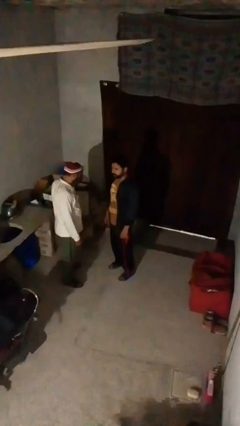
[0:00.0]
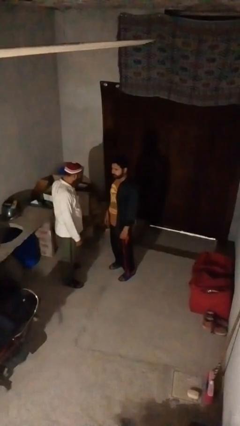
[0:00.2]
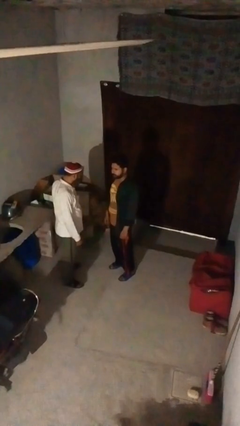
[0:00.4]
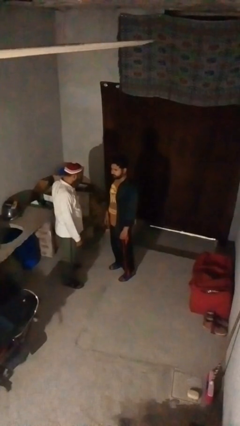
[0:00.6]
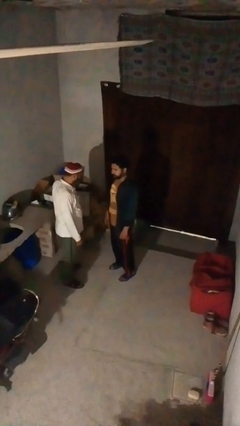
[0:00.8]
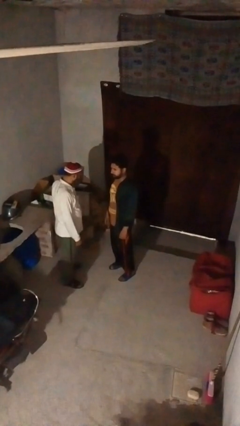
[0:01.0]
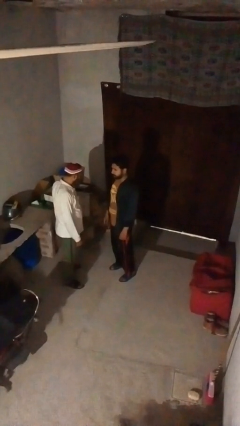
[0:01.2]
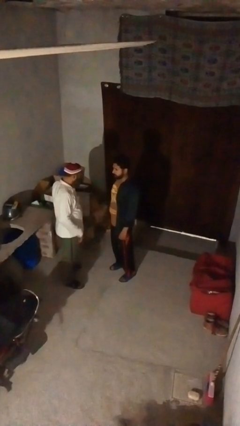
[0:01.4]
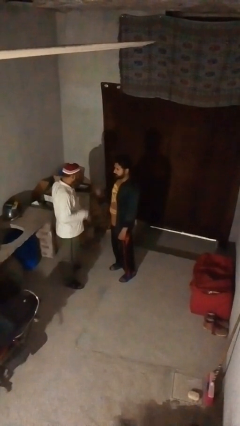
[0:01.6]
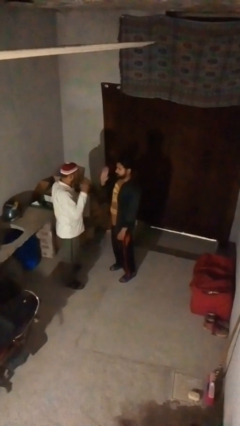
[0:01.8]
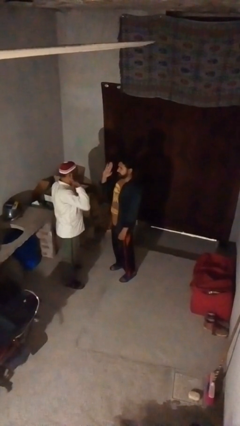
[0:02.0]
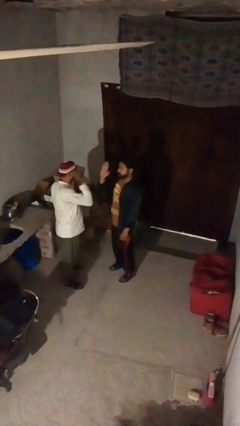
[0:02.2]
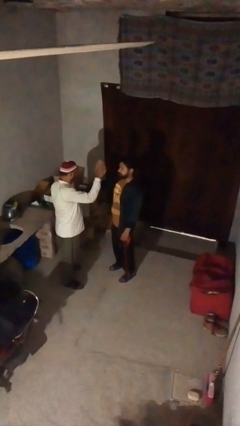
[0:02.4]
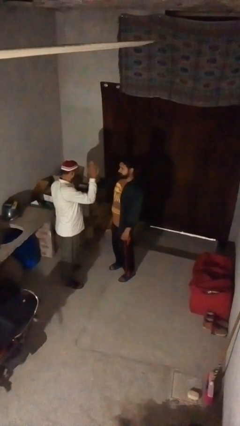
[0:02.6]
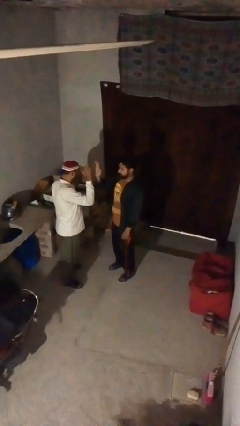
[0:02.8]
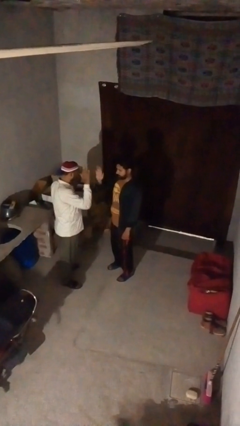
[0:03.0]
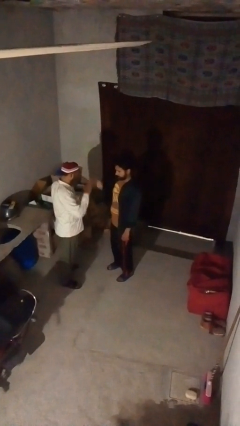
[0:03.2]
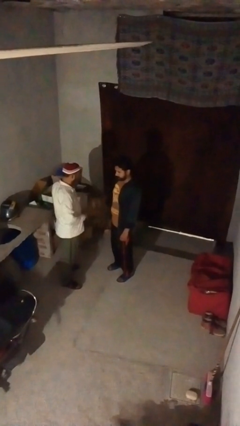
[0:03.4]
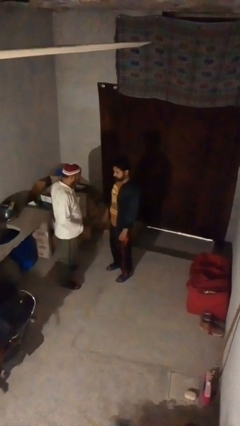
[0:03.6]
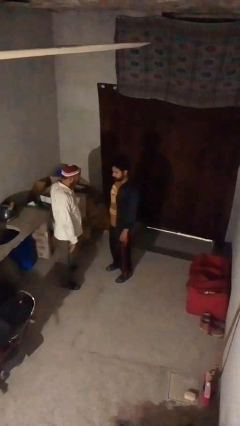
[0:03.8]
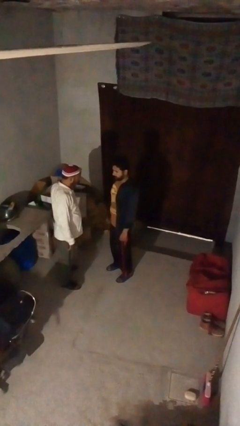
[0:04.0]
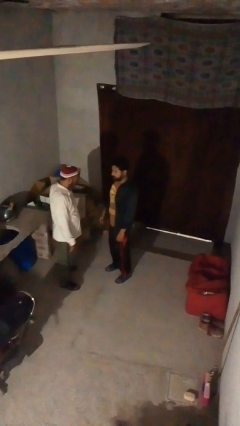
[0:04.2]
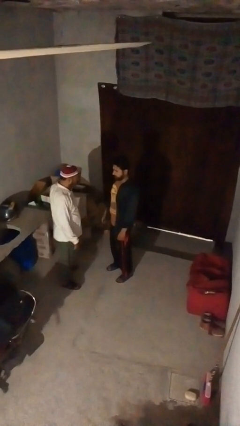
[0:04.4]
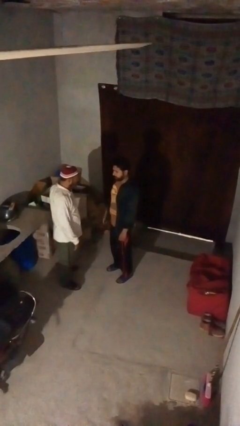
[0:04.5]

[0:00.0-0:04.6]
person highfives hand
